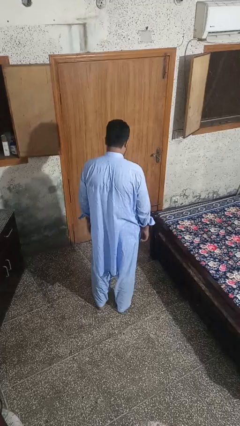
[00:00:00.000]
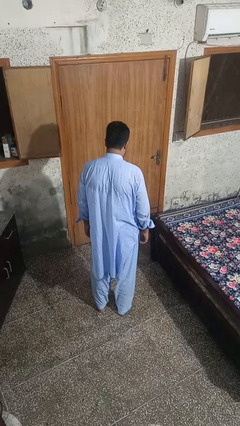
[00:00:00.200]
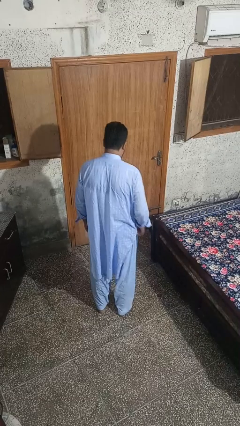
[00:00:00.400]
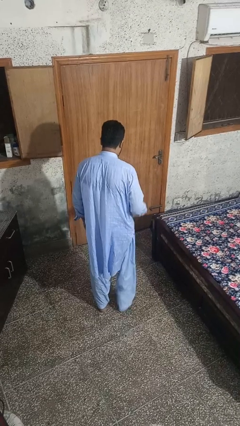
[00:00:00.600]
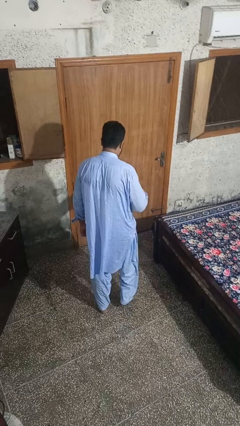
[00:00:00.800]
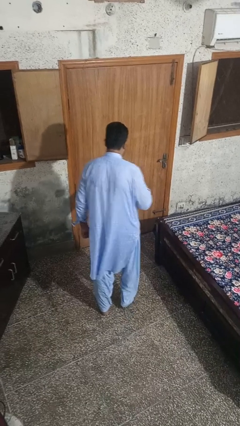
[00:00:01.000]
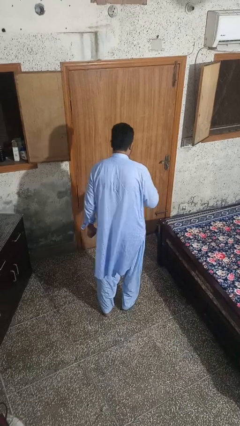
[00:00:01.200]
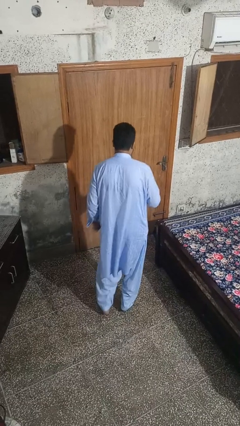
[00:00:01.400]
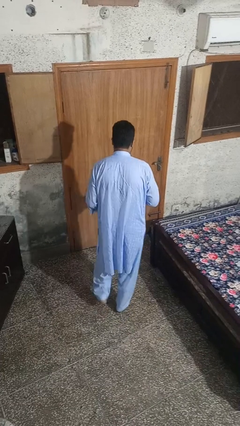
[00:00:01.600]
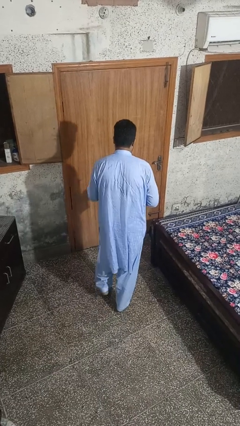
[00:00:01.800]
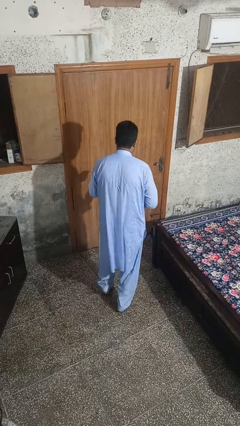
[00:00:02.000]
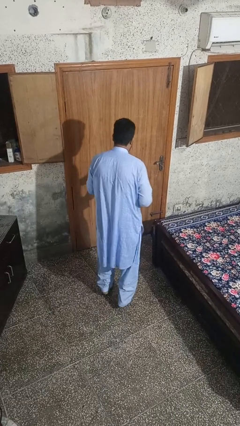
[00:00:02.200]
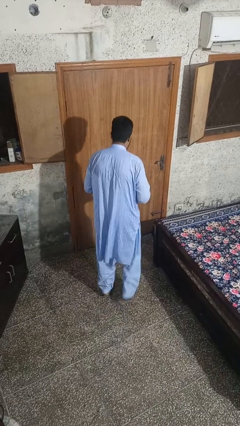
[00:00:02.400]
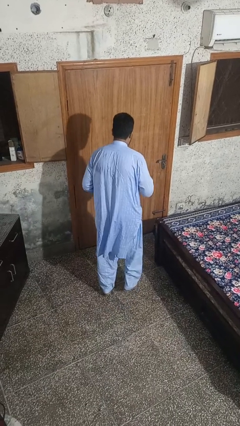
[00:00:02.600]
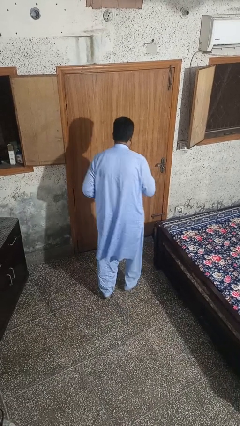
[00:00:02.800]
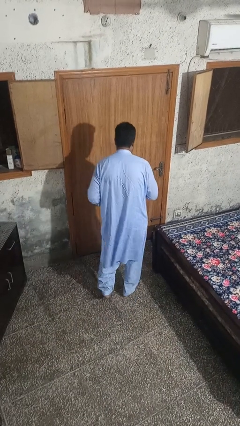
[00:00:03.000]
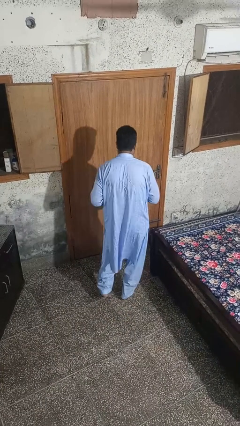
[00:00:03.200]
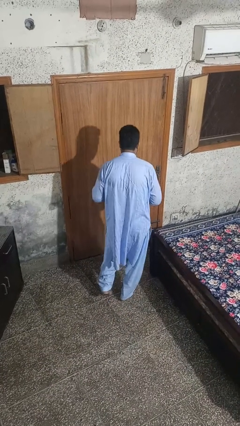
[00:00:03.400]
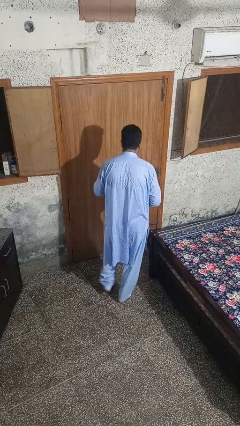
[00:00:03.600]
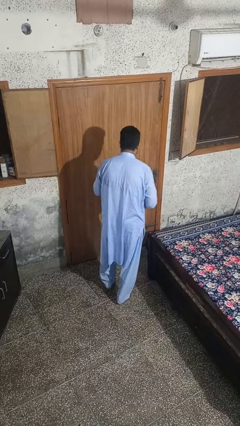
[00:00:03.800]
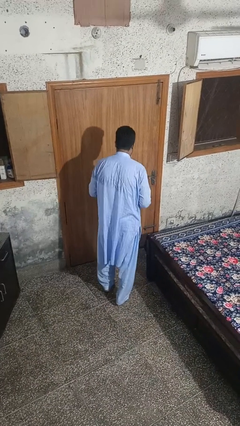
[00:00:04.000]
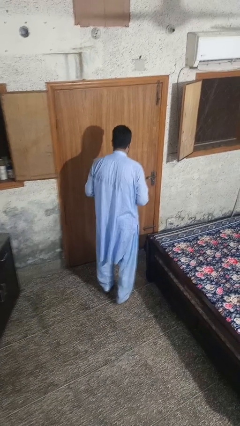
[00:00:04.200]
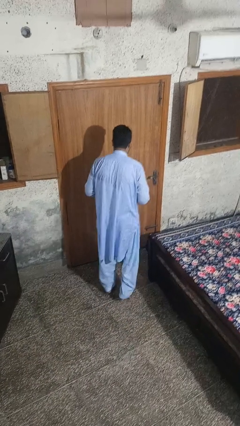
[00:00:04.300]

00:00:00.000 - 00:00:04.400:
person walks tiptoe

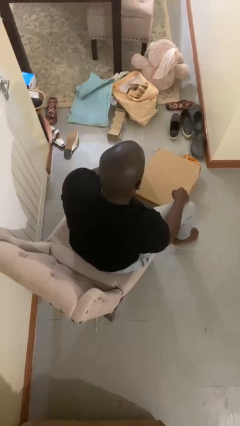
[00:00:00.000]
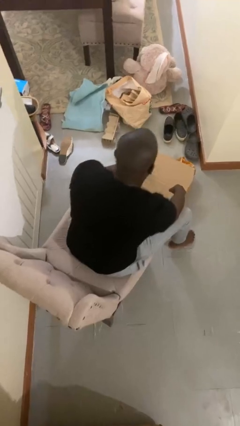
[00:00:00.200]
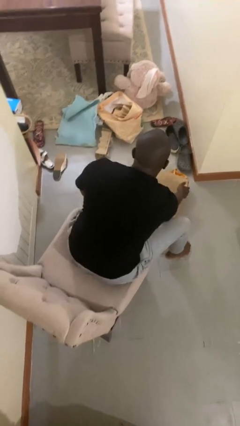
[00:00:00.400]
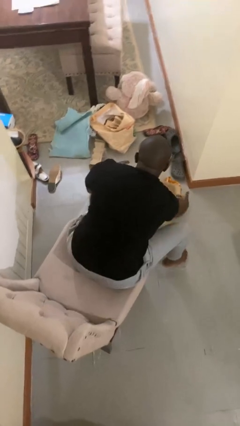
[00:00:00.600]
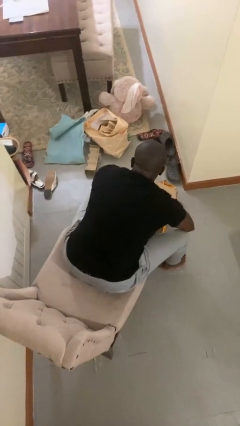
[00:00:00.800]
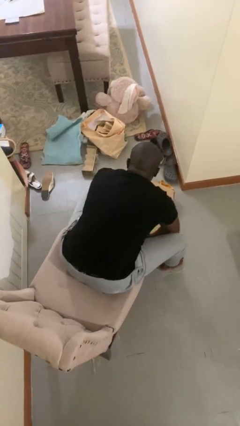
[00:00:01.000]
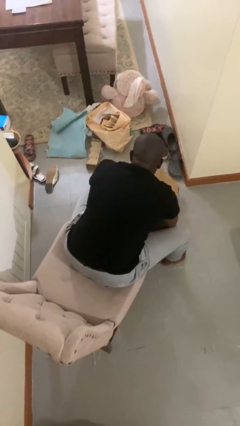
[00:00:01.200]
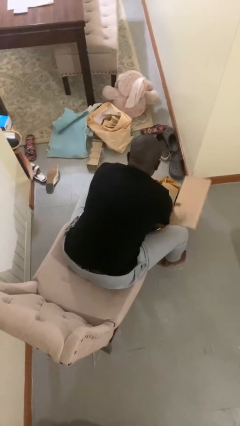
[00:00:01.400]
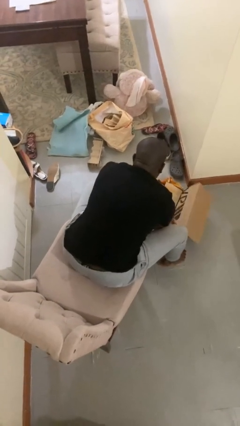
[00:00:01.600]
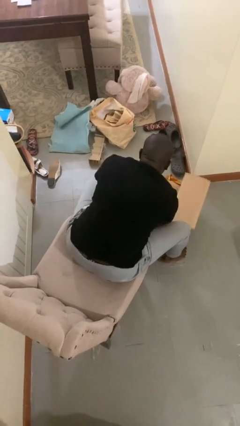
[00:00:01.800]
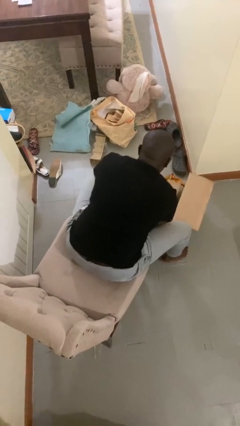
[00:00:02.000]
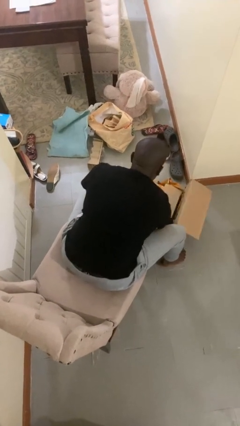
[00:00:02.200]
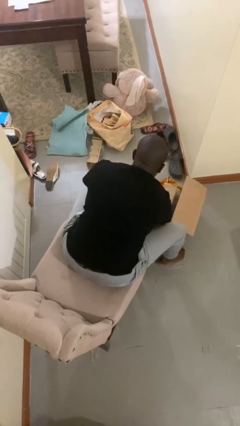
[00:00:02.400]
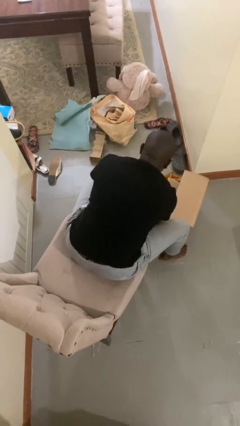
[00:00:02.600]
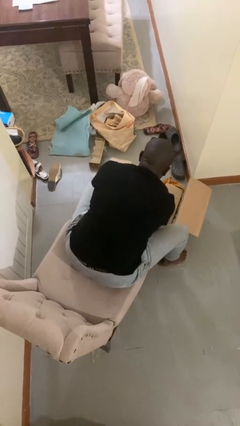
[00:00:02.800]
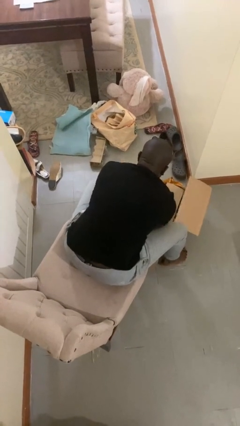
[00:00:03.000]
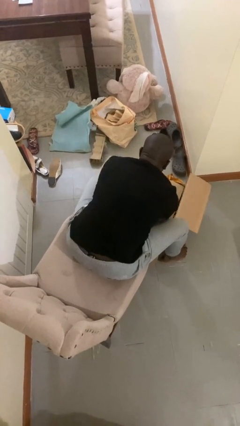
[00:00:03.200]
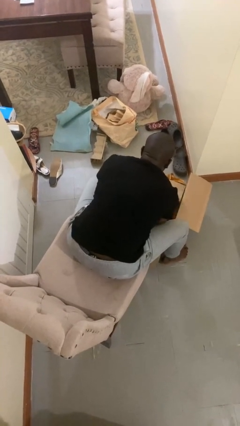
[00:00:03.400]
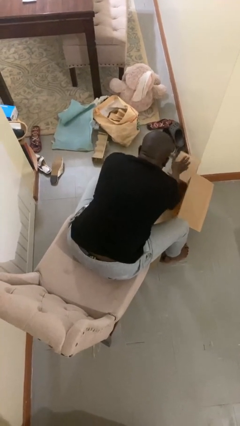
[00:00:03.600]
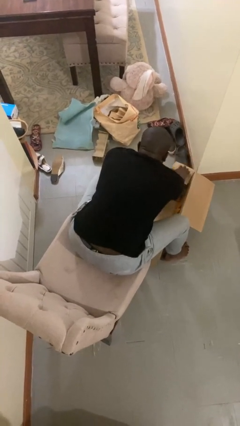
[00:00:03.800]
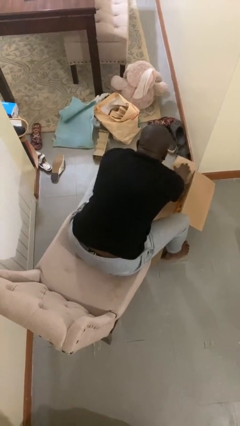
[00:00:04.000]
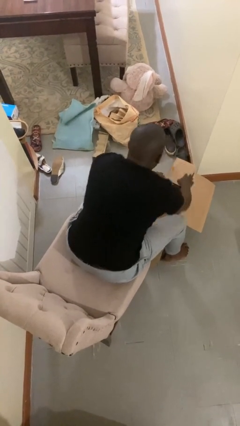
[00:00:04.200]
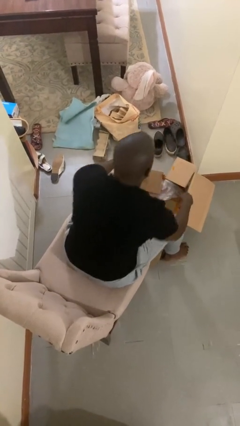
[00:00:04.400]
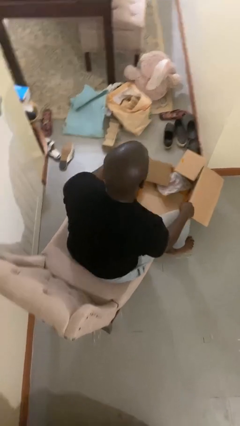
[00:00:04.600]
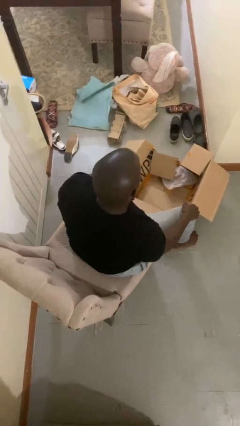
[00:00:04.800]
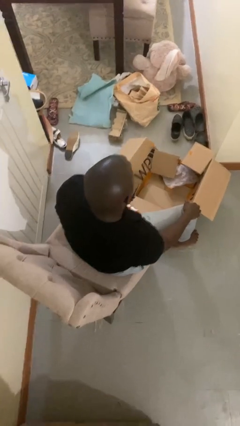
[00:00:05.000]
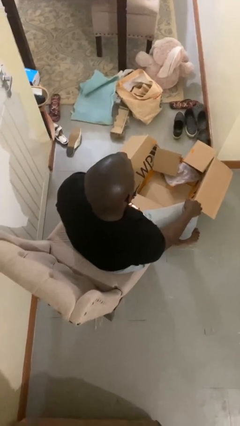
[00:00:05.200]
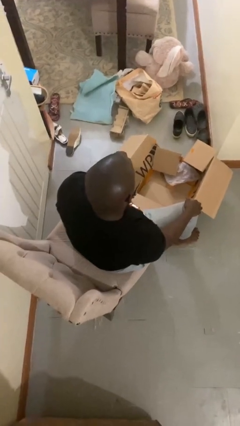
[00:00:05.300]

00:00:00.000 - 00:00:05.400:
person opens box

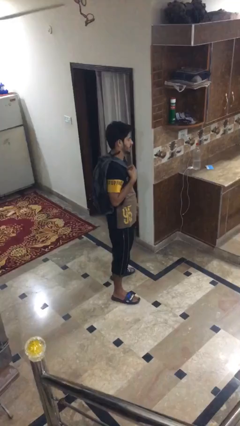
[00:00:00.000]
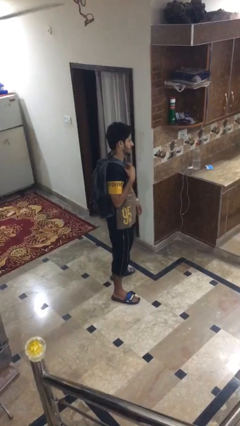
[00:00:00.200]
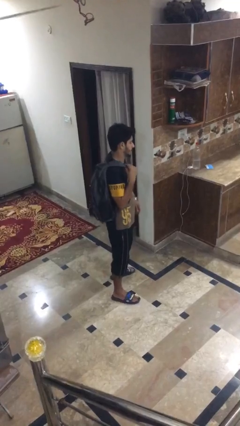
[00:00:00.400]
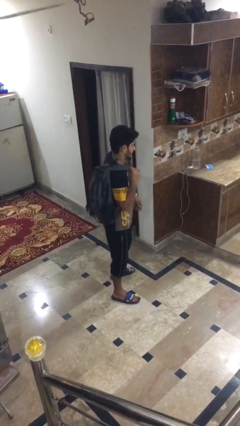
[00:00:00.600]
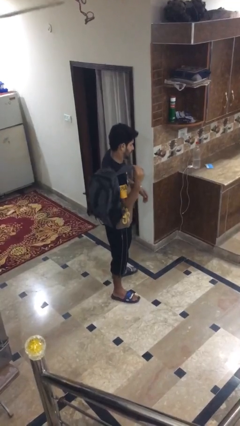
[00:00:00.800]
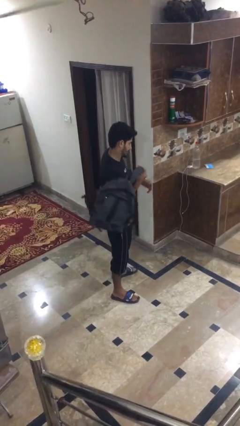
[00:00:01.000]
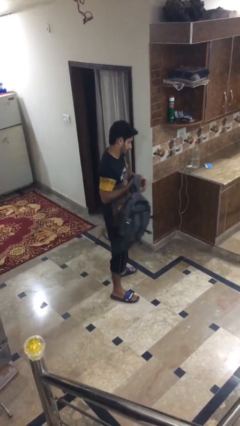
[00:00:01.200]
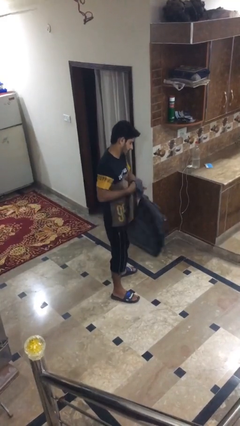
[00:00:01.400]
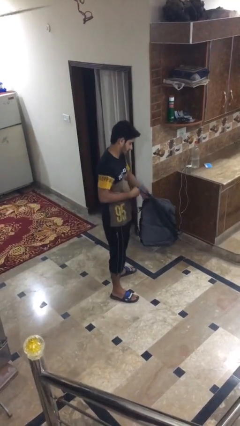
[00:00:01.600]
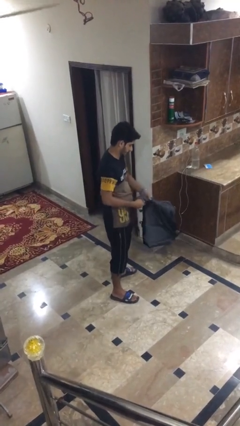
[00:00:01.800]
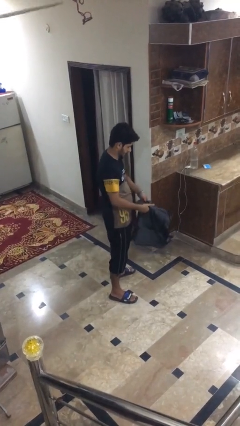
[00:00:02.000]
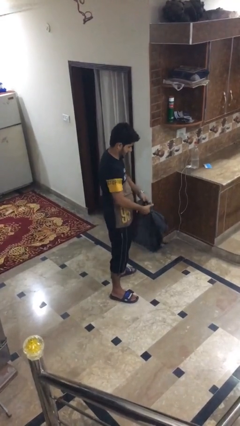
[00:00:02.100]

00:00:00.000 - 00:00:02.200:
person takes off backpack

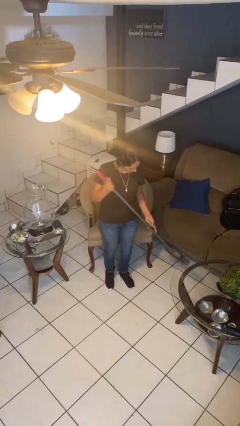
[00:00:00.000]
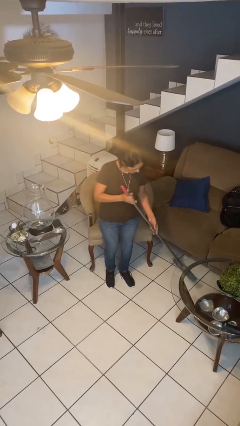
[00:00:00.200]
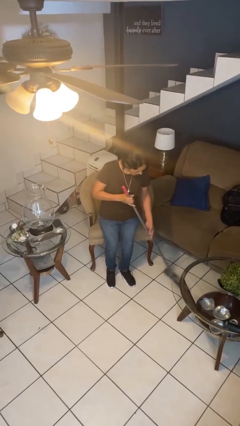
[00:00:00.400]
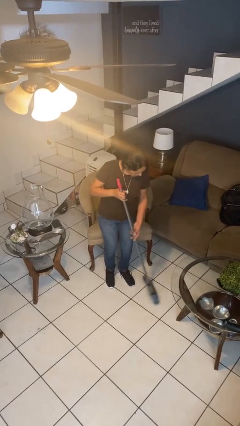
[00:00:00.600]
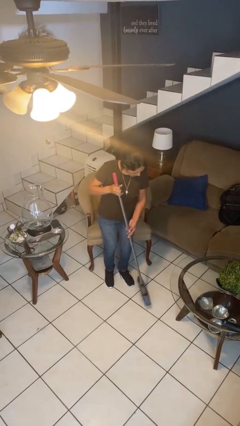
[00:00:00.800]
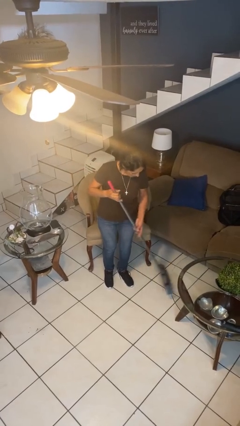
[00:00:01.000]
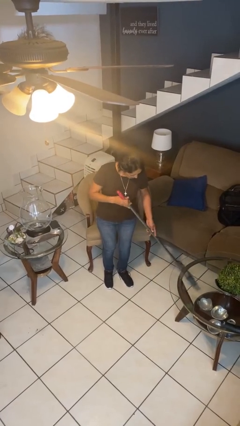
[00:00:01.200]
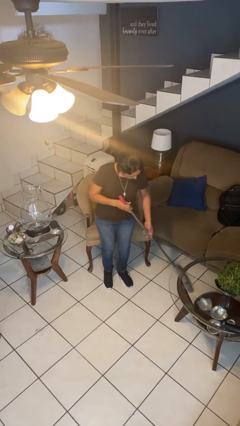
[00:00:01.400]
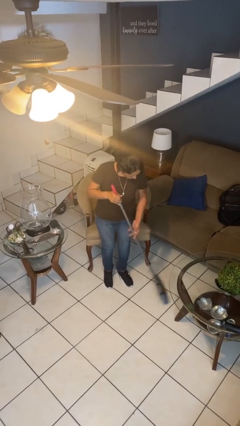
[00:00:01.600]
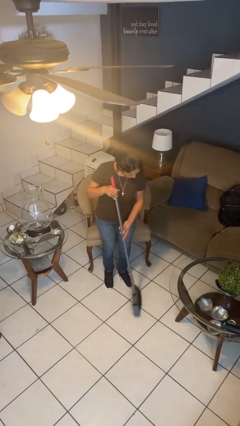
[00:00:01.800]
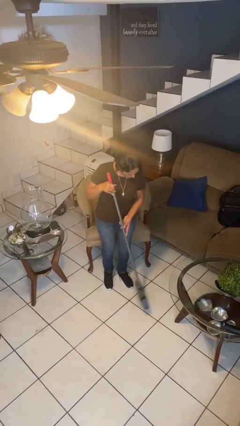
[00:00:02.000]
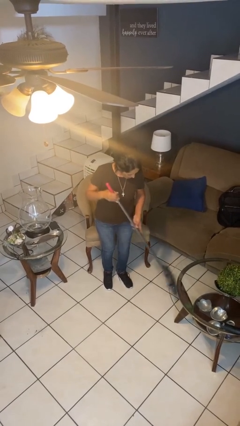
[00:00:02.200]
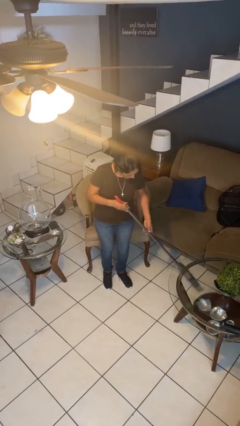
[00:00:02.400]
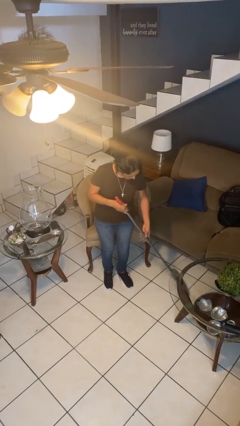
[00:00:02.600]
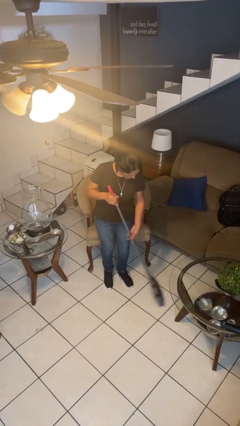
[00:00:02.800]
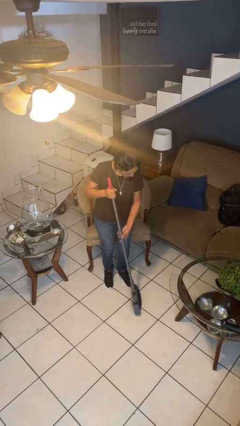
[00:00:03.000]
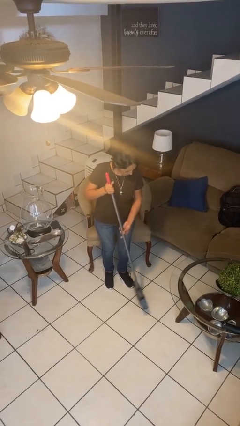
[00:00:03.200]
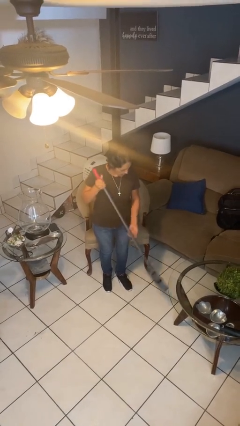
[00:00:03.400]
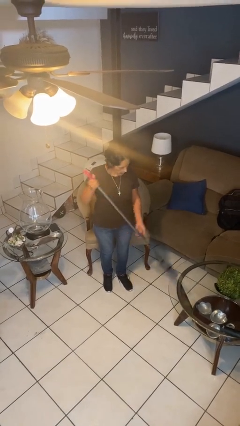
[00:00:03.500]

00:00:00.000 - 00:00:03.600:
person sweeps floor

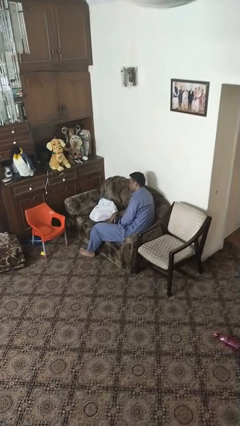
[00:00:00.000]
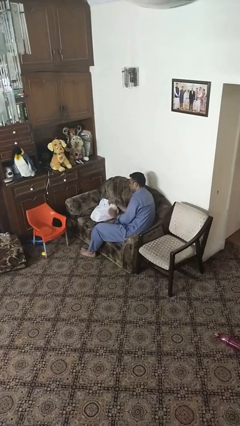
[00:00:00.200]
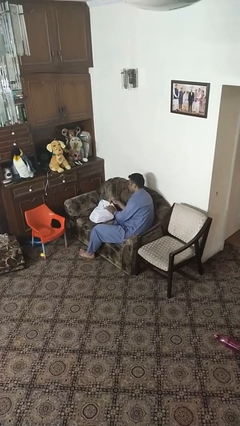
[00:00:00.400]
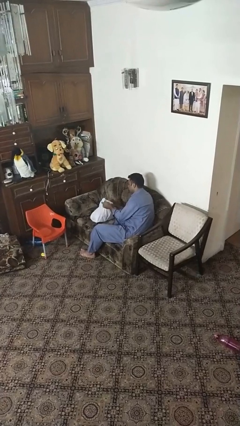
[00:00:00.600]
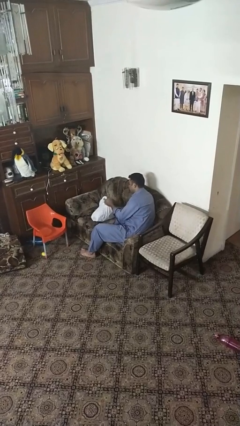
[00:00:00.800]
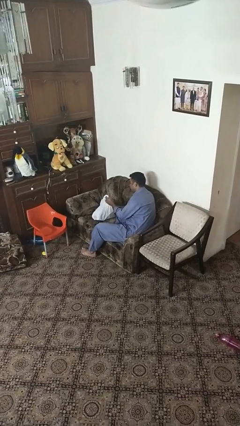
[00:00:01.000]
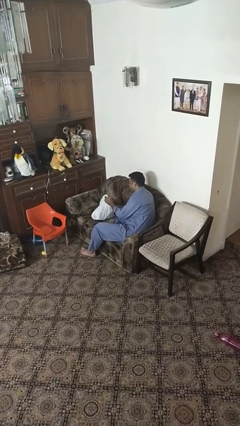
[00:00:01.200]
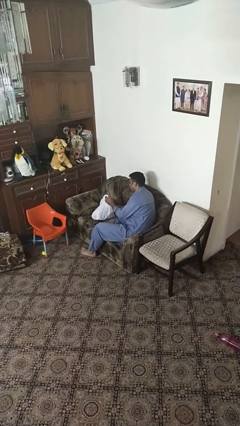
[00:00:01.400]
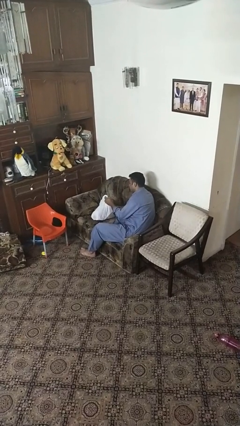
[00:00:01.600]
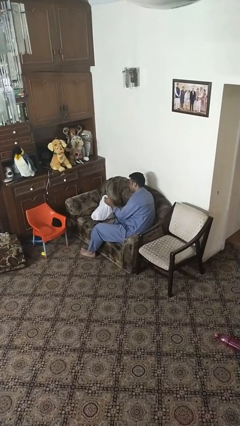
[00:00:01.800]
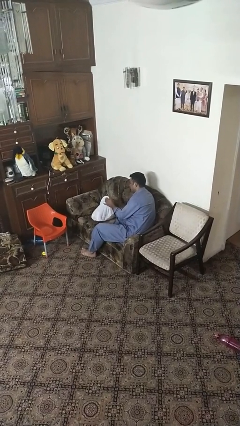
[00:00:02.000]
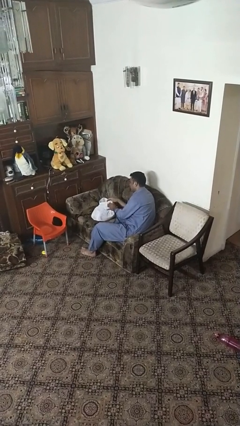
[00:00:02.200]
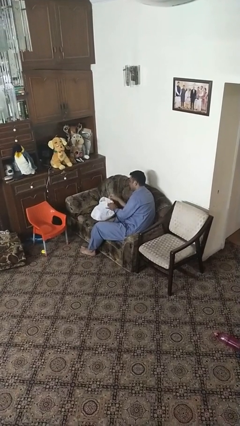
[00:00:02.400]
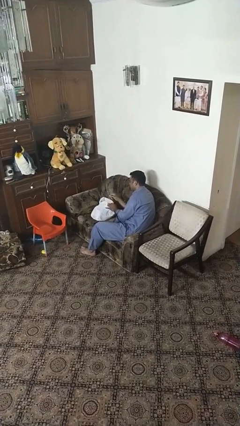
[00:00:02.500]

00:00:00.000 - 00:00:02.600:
person searches in bag
